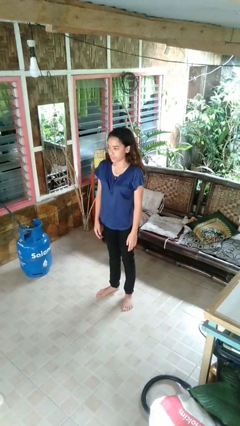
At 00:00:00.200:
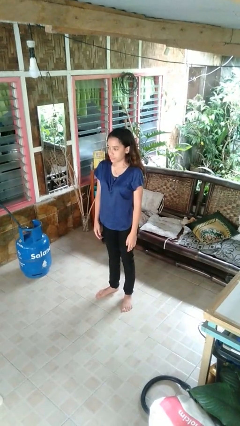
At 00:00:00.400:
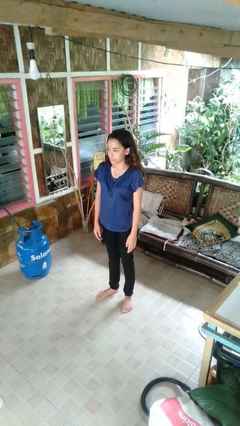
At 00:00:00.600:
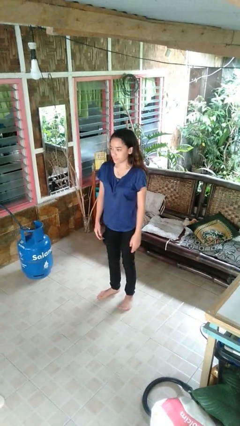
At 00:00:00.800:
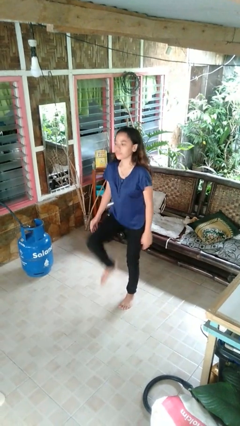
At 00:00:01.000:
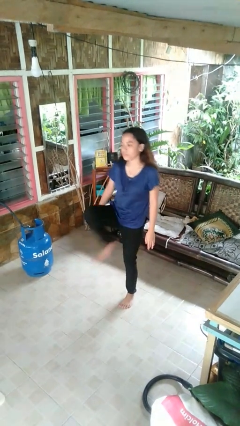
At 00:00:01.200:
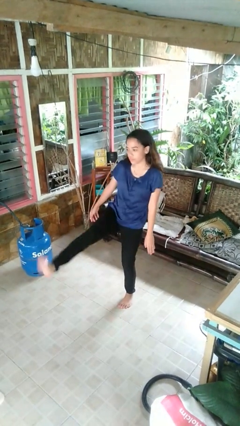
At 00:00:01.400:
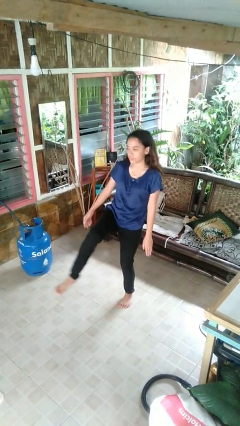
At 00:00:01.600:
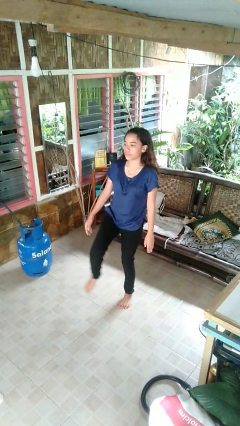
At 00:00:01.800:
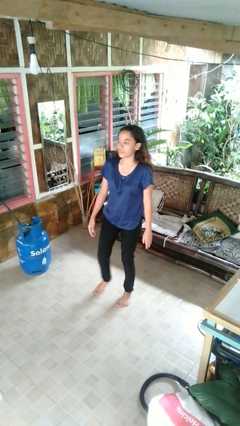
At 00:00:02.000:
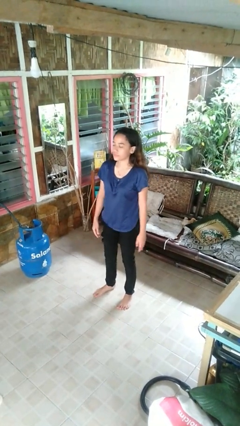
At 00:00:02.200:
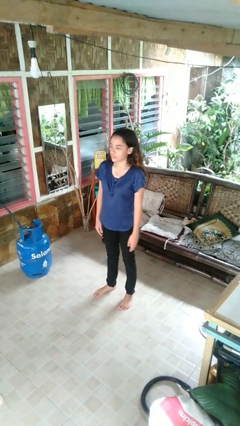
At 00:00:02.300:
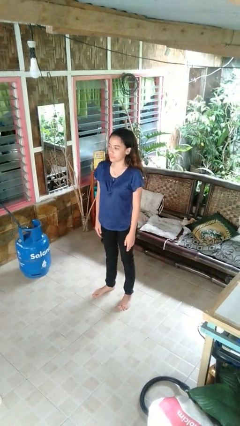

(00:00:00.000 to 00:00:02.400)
person karate kicks

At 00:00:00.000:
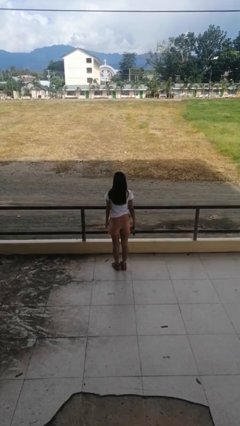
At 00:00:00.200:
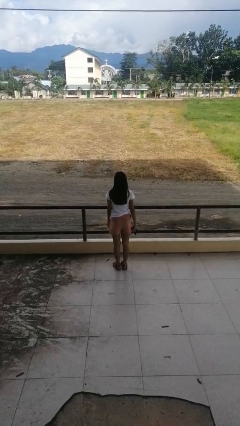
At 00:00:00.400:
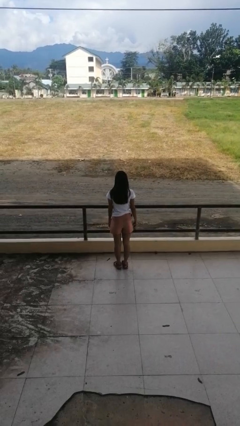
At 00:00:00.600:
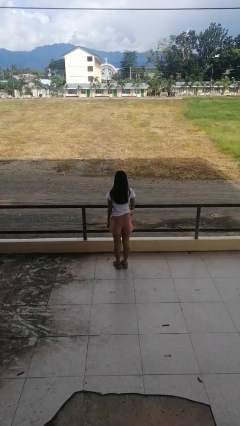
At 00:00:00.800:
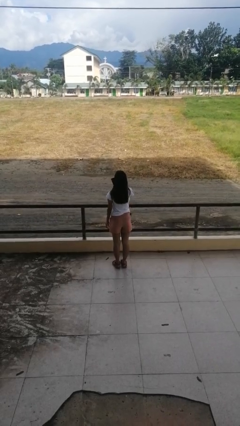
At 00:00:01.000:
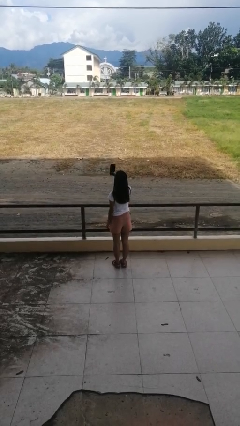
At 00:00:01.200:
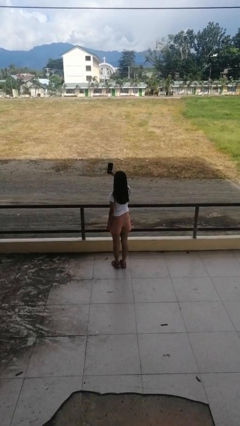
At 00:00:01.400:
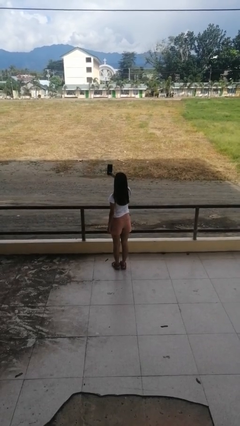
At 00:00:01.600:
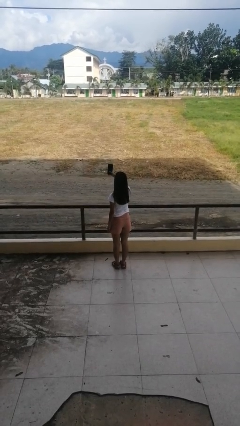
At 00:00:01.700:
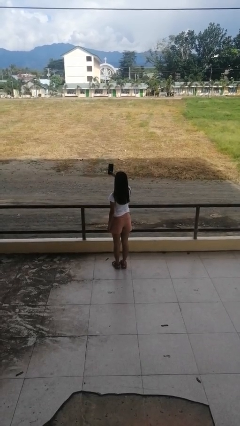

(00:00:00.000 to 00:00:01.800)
person takes selfie

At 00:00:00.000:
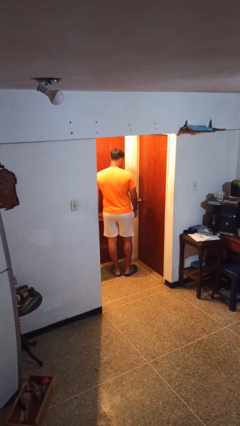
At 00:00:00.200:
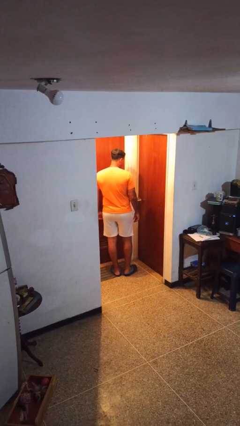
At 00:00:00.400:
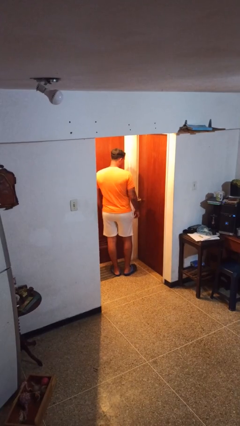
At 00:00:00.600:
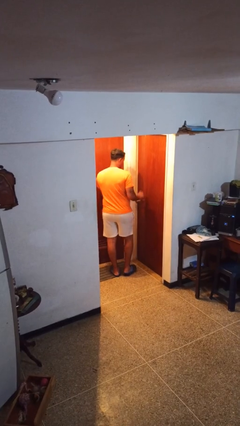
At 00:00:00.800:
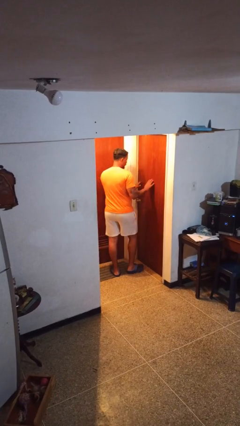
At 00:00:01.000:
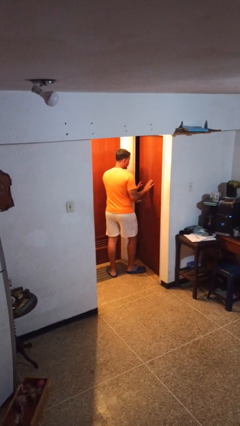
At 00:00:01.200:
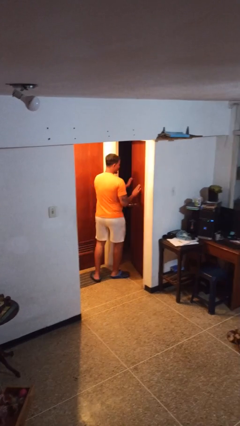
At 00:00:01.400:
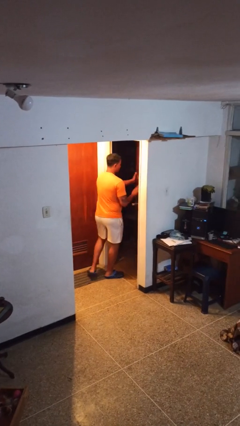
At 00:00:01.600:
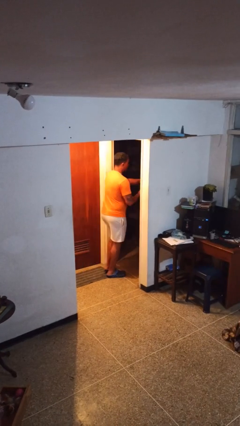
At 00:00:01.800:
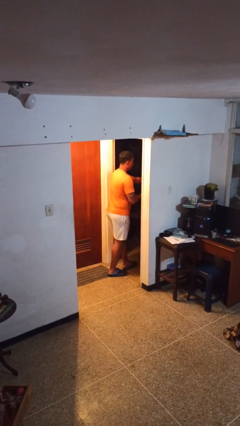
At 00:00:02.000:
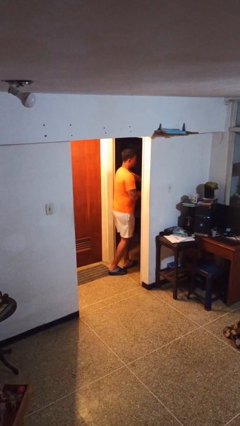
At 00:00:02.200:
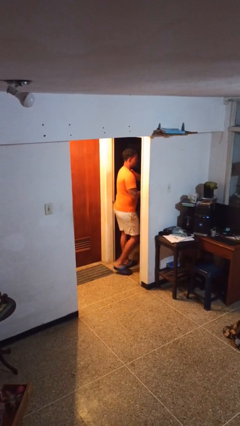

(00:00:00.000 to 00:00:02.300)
person opens facility door

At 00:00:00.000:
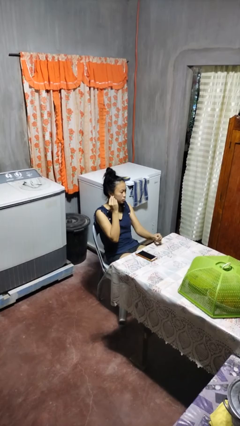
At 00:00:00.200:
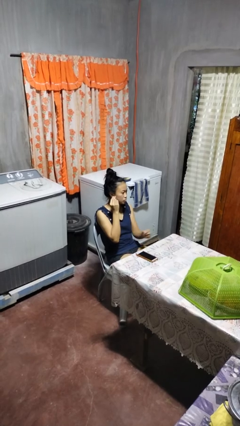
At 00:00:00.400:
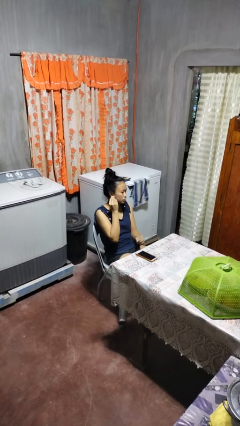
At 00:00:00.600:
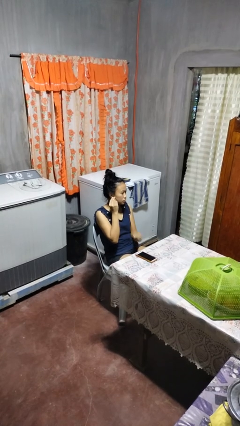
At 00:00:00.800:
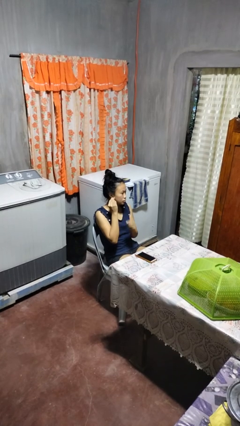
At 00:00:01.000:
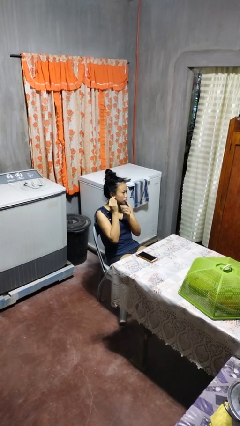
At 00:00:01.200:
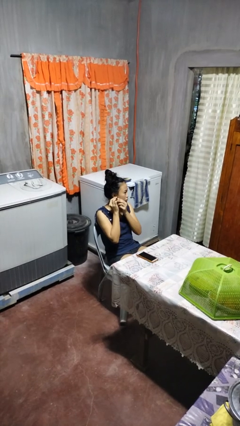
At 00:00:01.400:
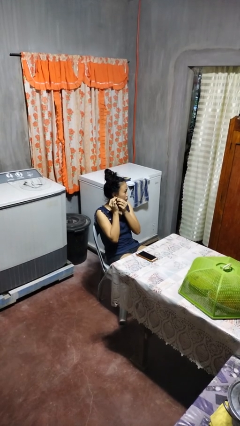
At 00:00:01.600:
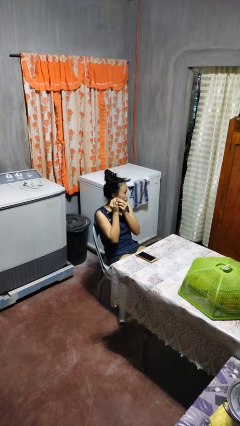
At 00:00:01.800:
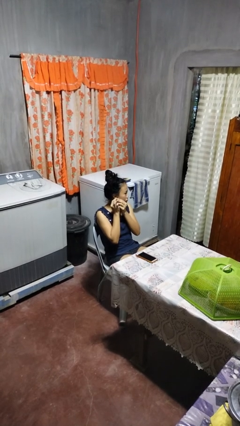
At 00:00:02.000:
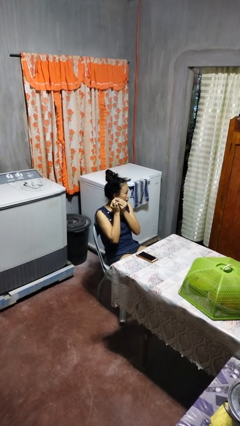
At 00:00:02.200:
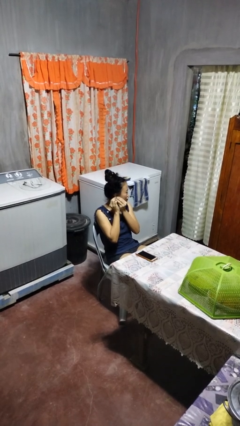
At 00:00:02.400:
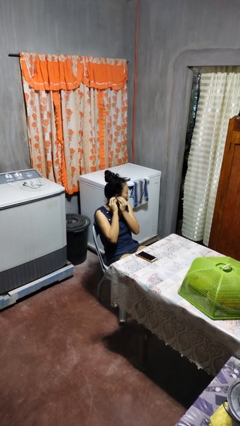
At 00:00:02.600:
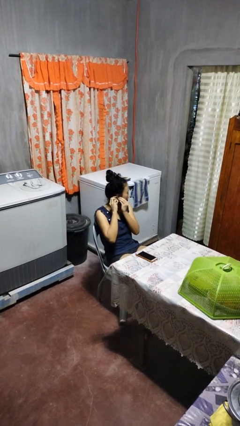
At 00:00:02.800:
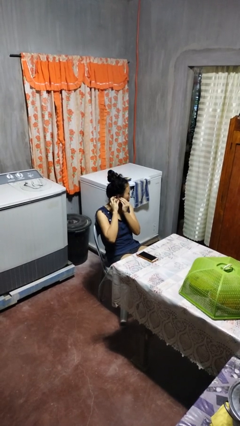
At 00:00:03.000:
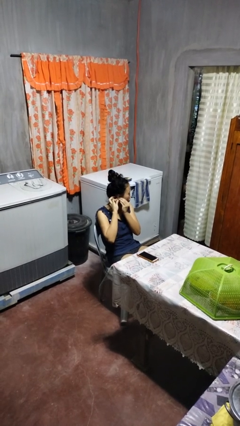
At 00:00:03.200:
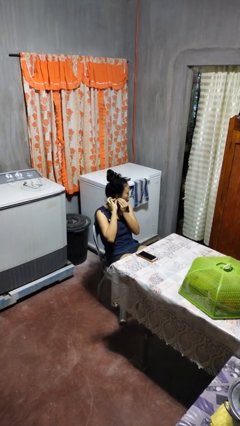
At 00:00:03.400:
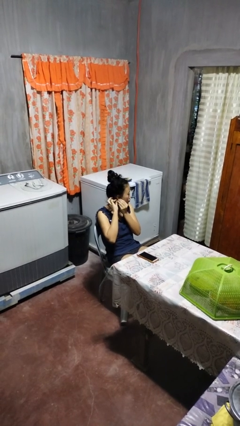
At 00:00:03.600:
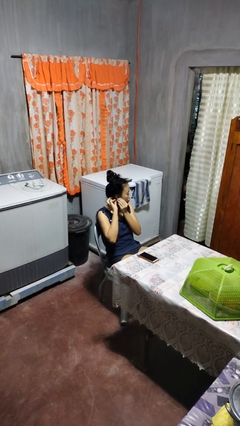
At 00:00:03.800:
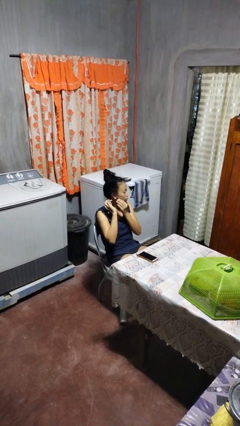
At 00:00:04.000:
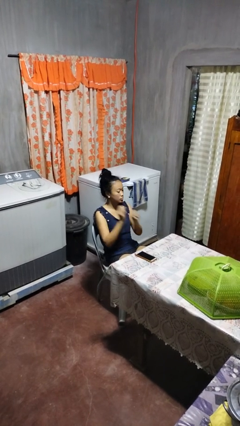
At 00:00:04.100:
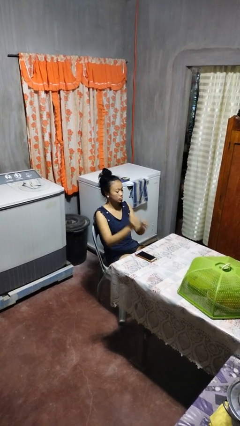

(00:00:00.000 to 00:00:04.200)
person puts on earrings

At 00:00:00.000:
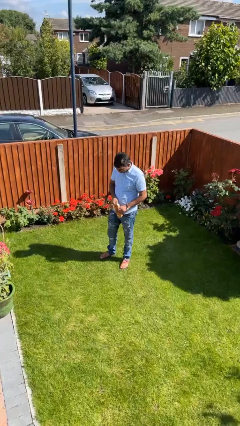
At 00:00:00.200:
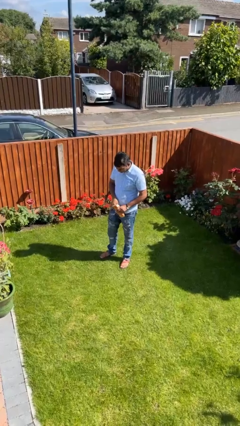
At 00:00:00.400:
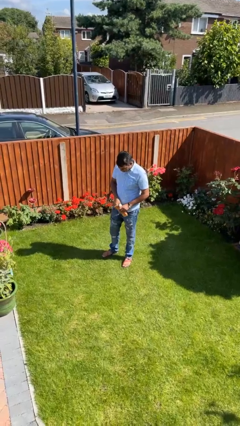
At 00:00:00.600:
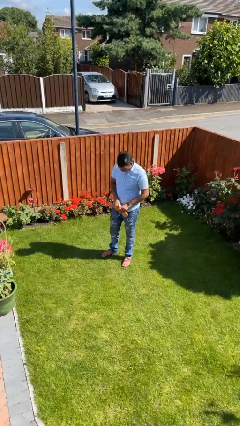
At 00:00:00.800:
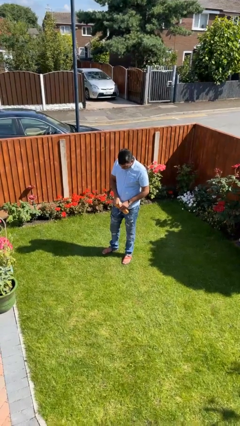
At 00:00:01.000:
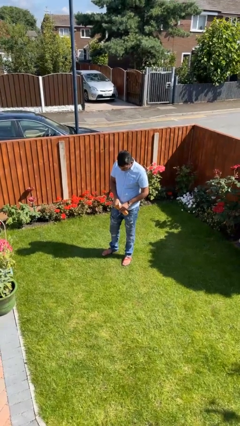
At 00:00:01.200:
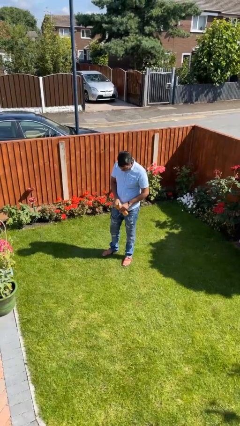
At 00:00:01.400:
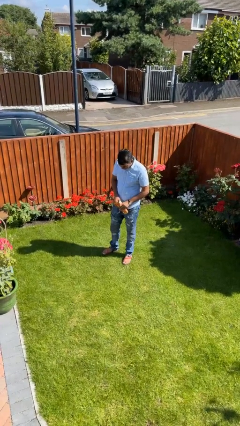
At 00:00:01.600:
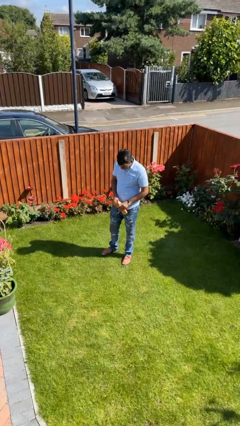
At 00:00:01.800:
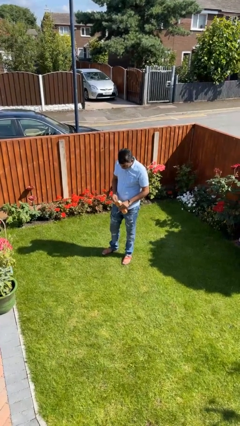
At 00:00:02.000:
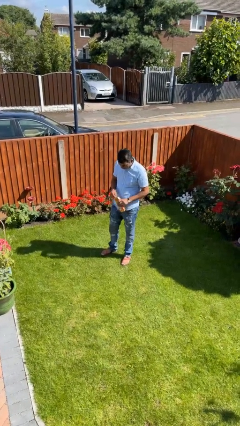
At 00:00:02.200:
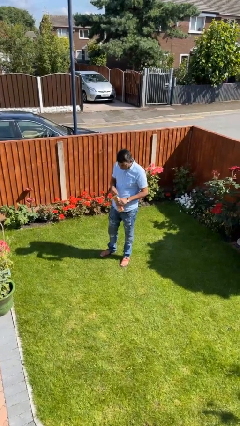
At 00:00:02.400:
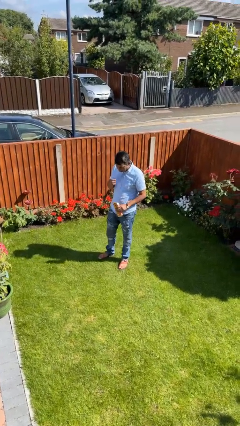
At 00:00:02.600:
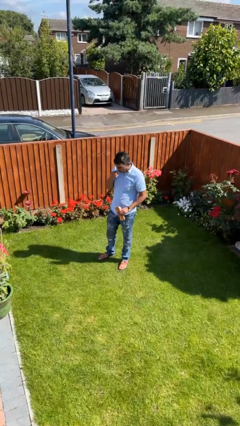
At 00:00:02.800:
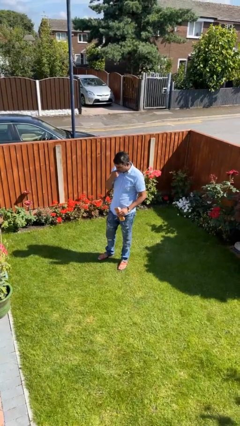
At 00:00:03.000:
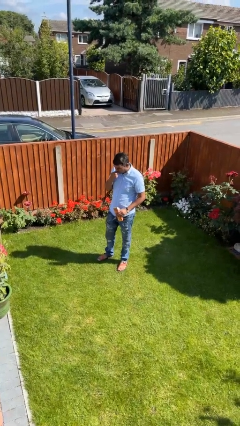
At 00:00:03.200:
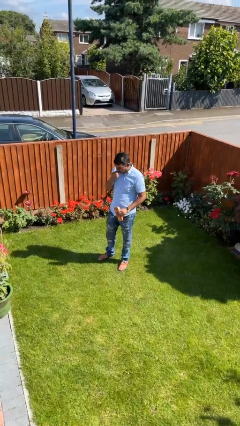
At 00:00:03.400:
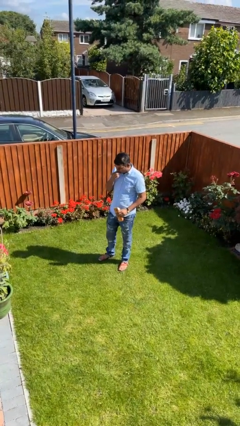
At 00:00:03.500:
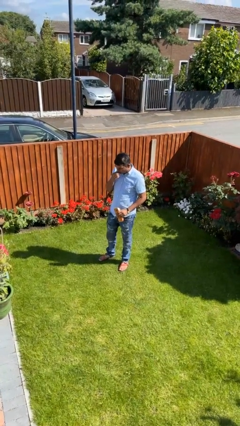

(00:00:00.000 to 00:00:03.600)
person eats snack from bag

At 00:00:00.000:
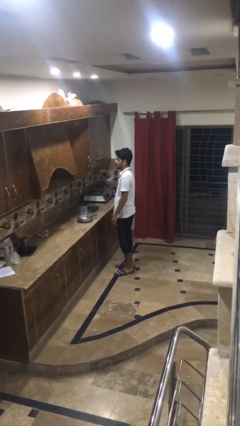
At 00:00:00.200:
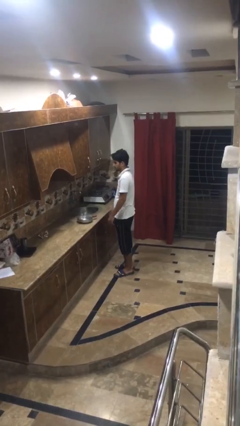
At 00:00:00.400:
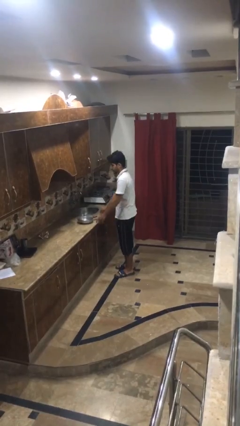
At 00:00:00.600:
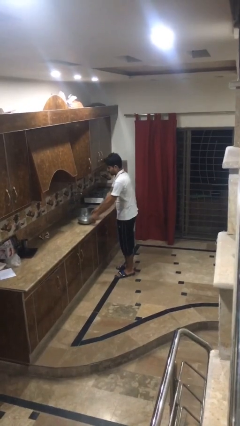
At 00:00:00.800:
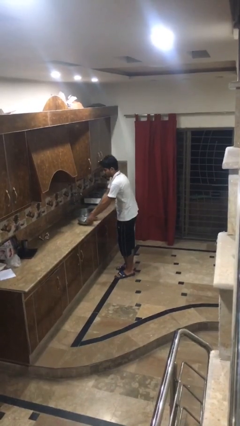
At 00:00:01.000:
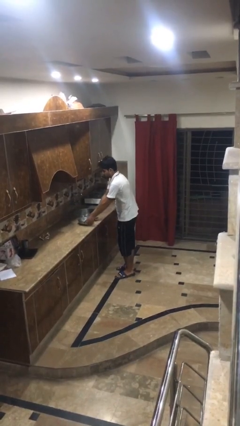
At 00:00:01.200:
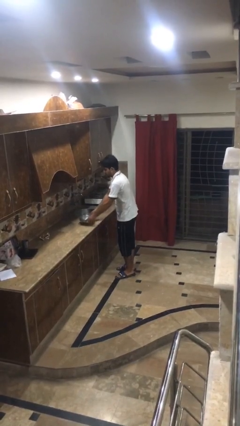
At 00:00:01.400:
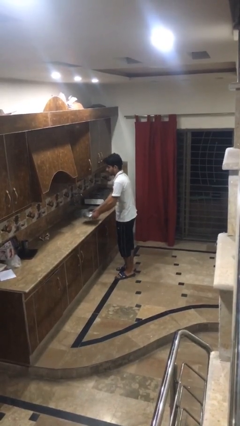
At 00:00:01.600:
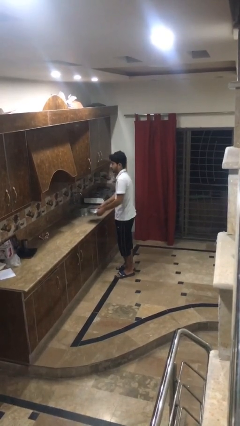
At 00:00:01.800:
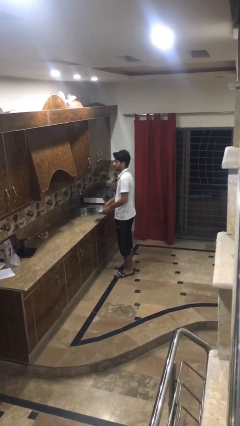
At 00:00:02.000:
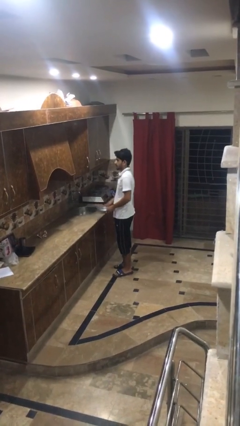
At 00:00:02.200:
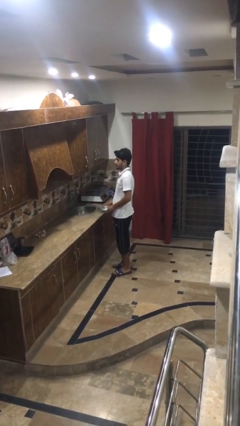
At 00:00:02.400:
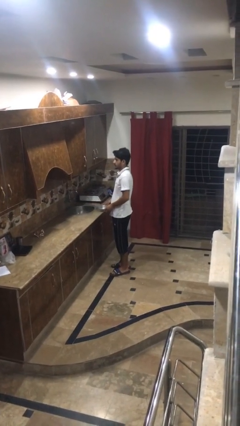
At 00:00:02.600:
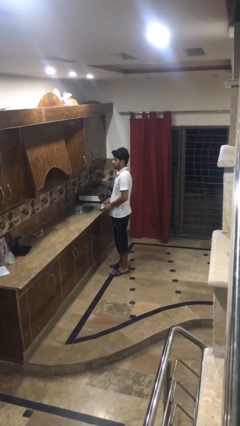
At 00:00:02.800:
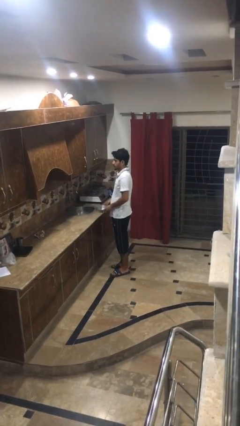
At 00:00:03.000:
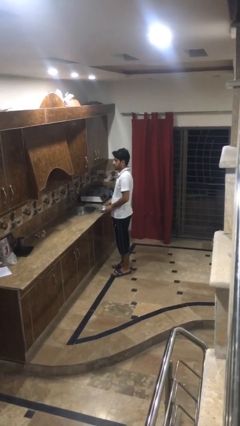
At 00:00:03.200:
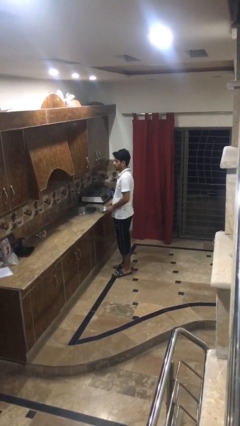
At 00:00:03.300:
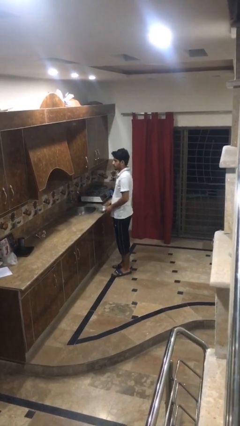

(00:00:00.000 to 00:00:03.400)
person picks up object from countertop
